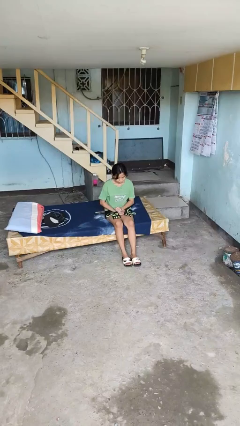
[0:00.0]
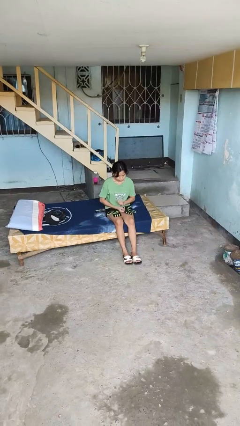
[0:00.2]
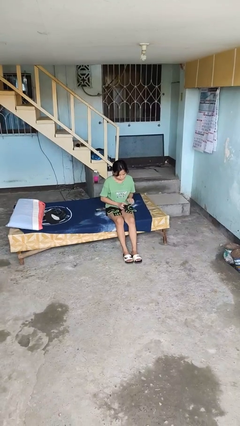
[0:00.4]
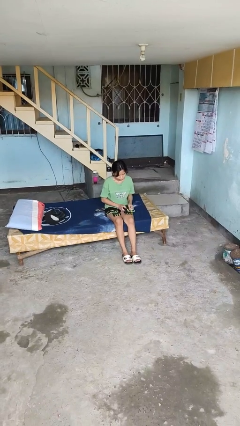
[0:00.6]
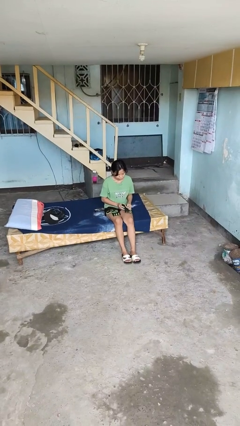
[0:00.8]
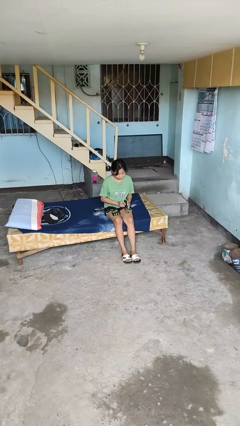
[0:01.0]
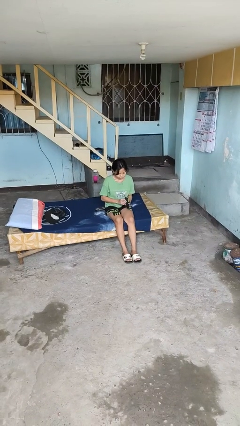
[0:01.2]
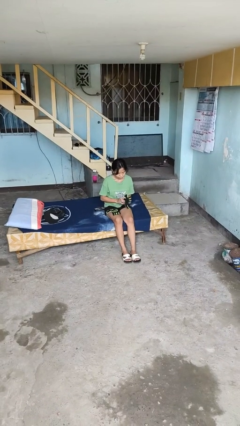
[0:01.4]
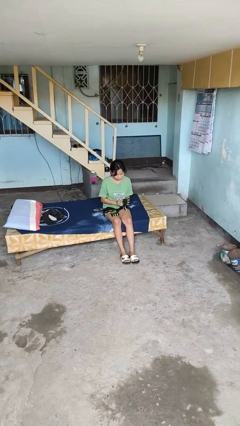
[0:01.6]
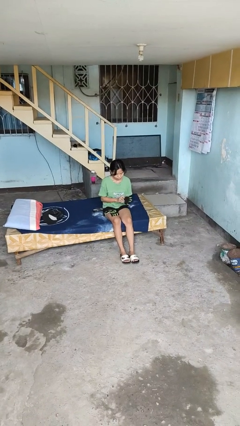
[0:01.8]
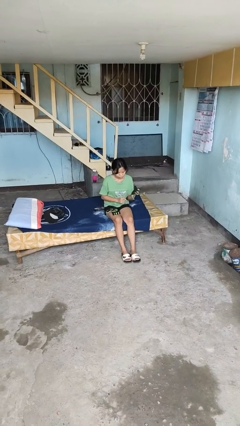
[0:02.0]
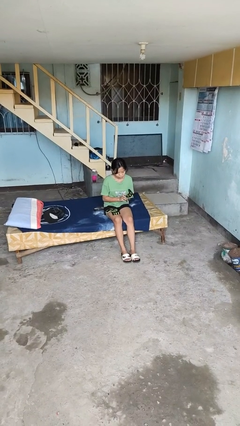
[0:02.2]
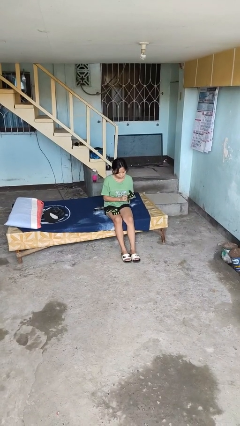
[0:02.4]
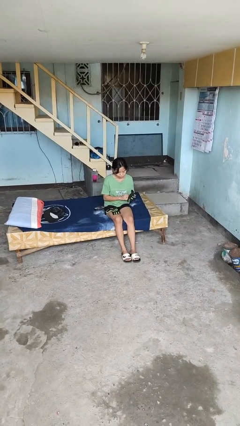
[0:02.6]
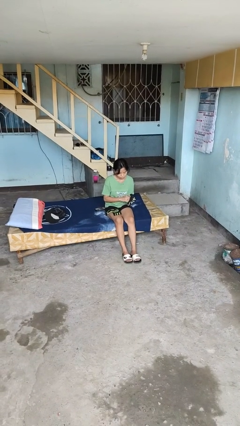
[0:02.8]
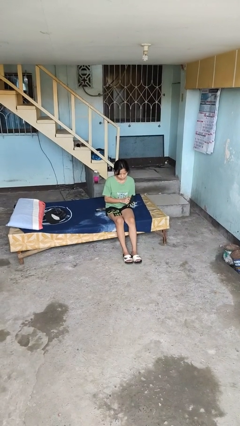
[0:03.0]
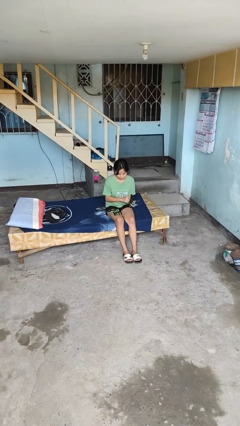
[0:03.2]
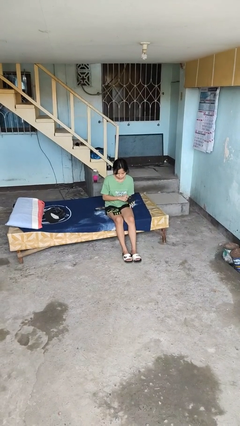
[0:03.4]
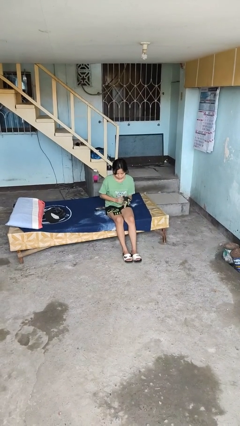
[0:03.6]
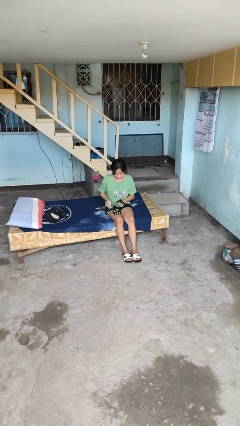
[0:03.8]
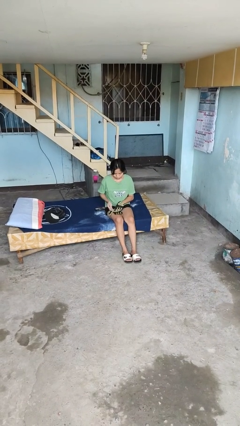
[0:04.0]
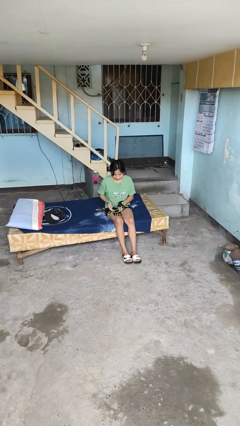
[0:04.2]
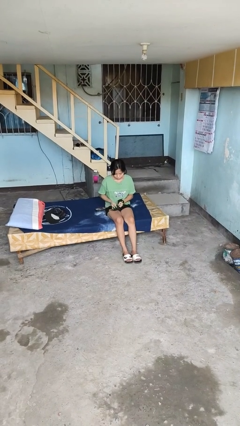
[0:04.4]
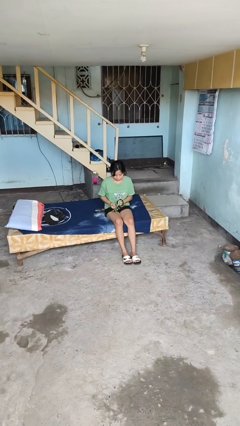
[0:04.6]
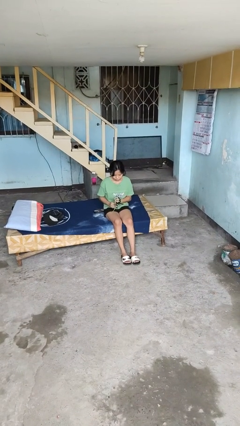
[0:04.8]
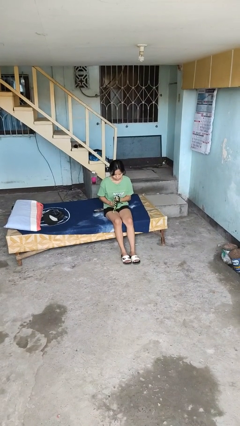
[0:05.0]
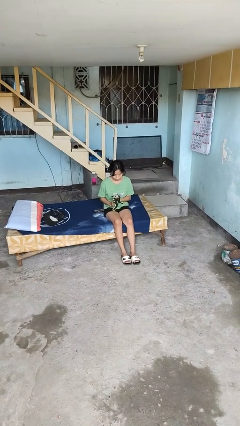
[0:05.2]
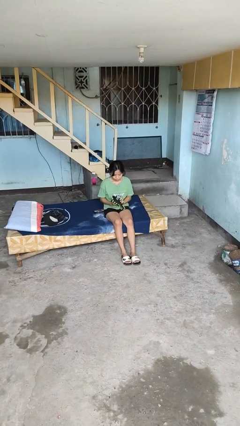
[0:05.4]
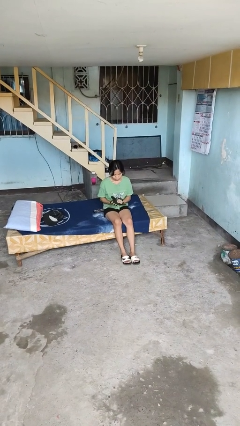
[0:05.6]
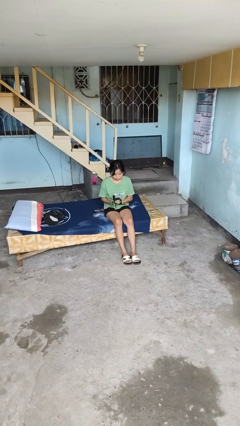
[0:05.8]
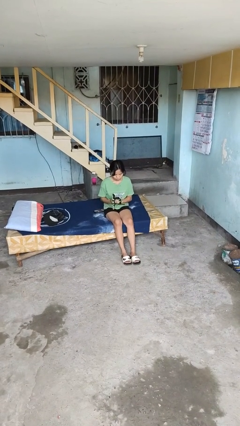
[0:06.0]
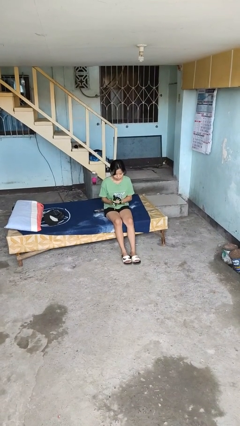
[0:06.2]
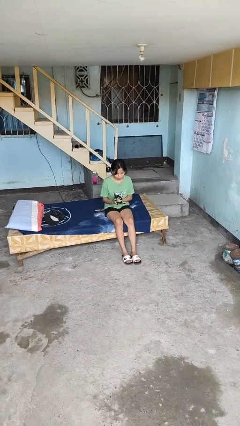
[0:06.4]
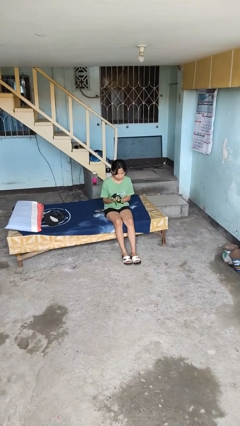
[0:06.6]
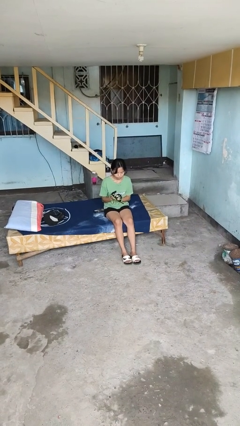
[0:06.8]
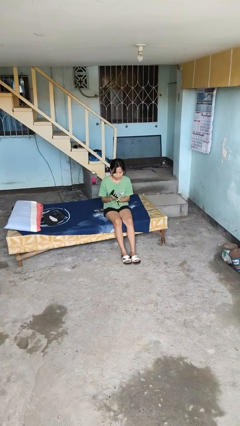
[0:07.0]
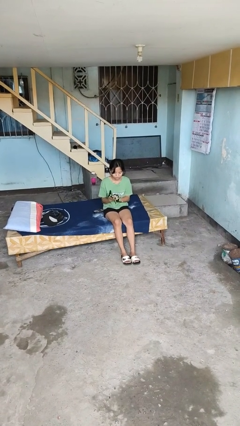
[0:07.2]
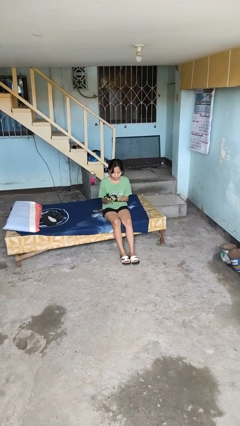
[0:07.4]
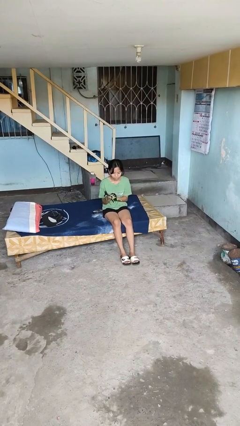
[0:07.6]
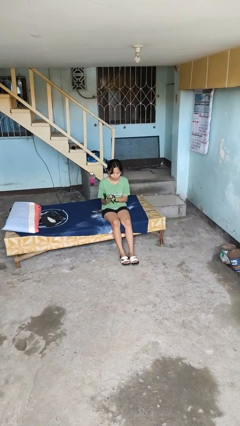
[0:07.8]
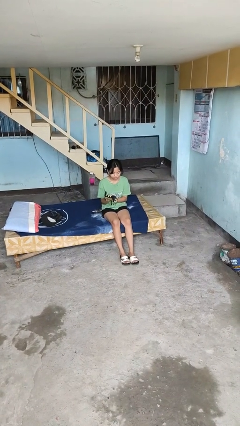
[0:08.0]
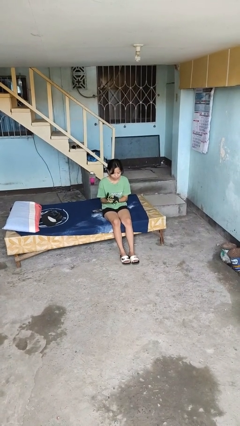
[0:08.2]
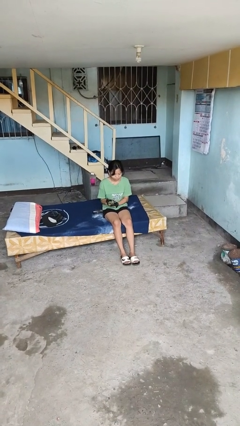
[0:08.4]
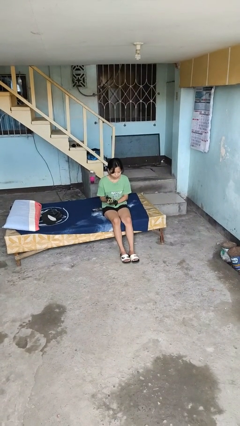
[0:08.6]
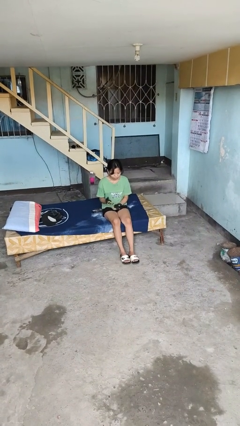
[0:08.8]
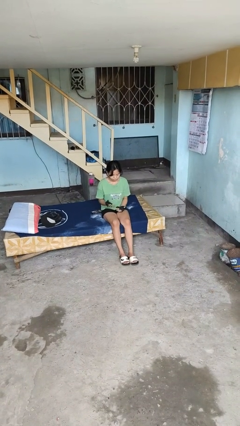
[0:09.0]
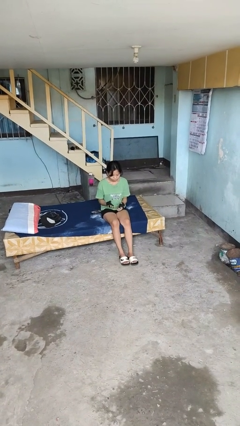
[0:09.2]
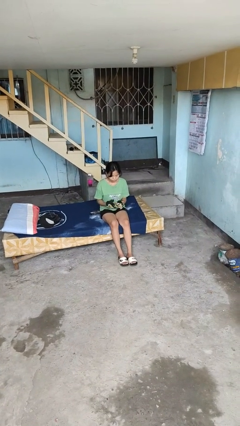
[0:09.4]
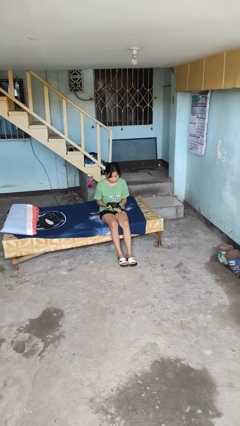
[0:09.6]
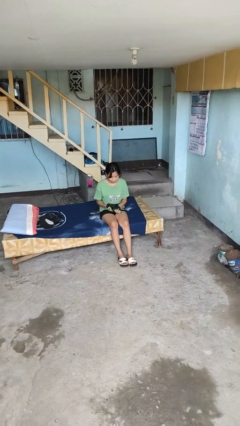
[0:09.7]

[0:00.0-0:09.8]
person puts on gloves

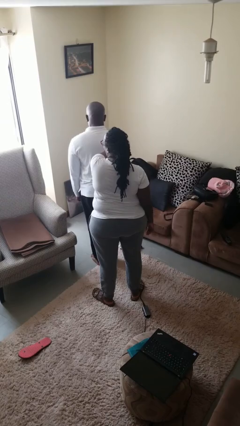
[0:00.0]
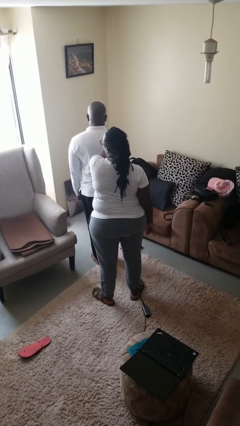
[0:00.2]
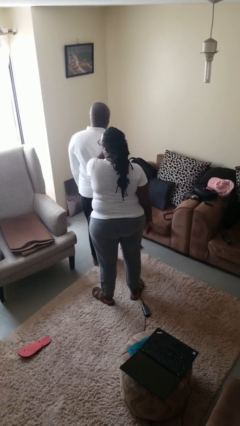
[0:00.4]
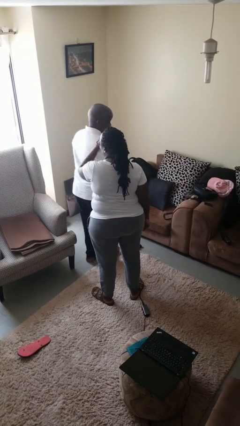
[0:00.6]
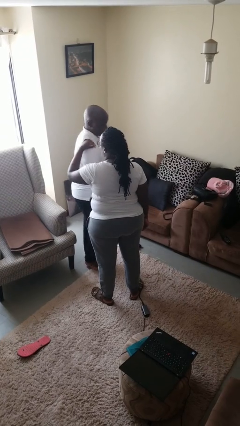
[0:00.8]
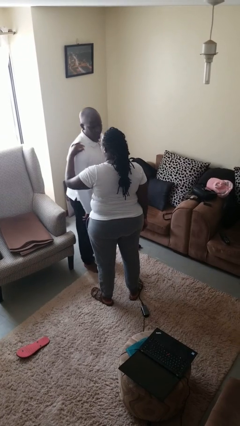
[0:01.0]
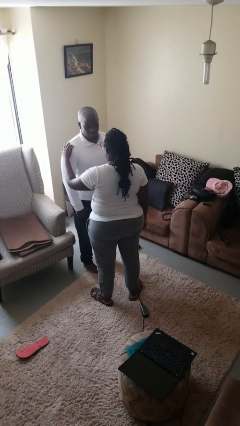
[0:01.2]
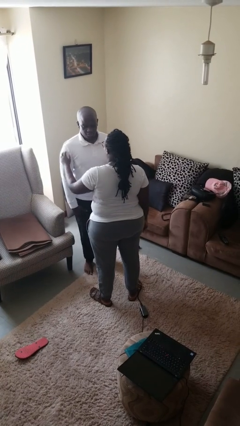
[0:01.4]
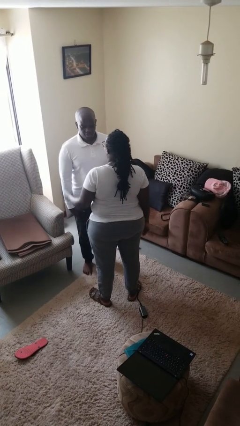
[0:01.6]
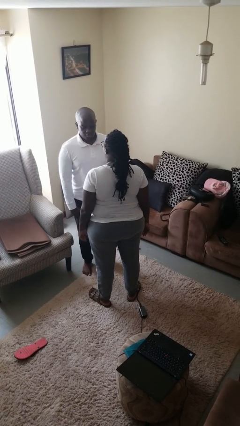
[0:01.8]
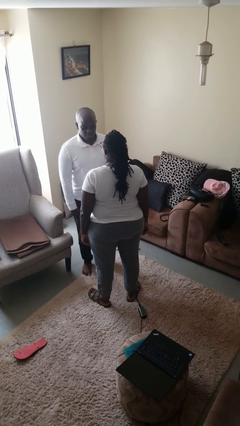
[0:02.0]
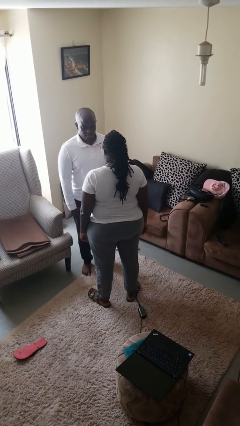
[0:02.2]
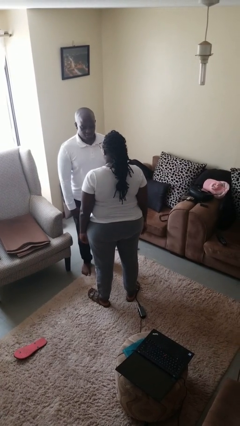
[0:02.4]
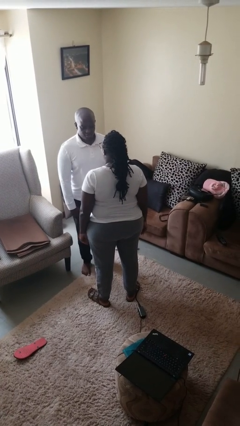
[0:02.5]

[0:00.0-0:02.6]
person spins person around

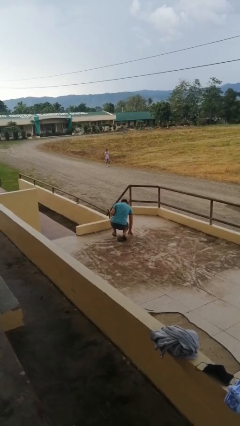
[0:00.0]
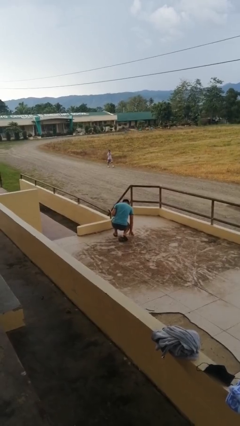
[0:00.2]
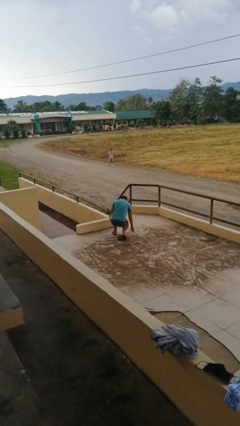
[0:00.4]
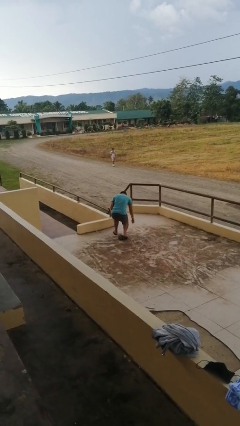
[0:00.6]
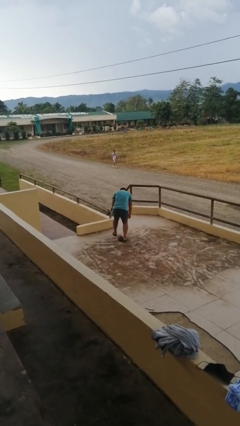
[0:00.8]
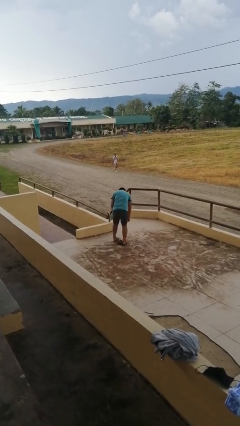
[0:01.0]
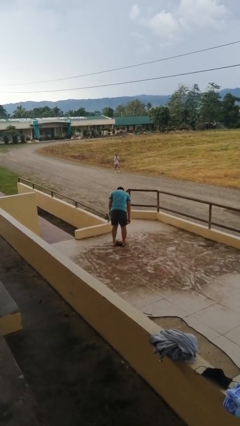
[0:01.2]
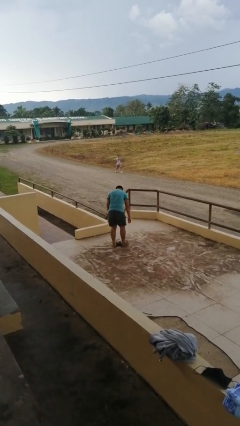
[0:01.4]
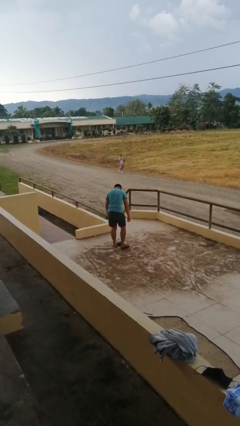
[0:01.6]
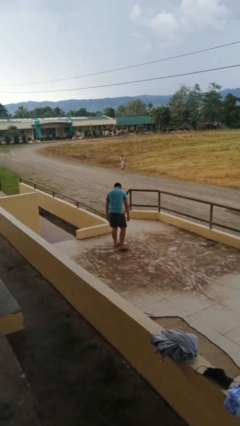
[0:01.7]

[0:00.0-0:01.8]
person stands up from floor

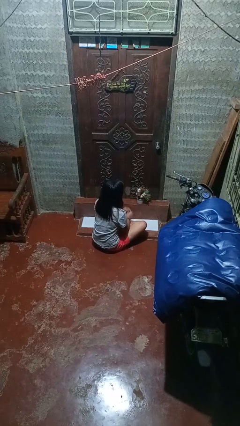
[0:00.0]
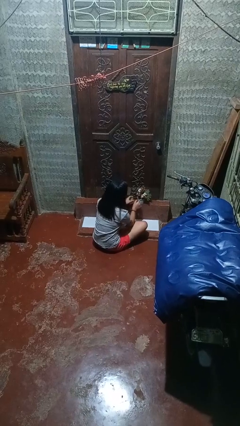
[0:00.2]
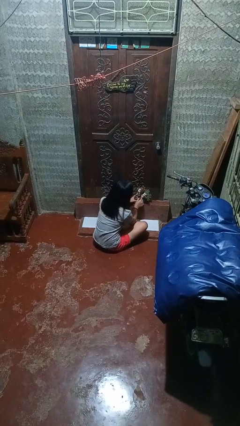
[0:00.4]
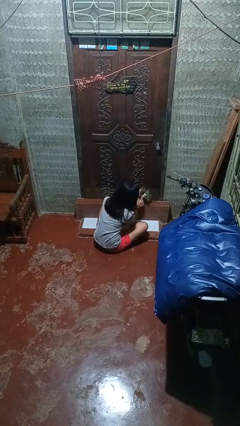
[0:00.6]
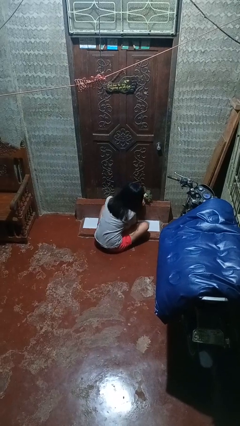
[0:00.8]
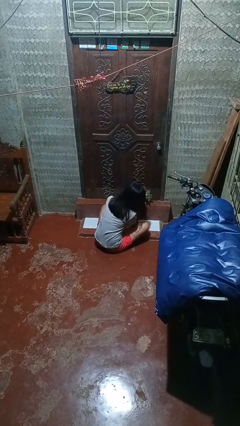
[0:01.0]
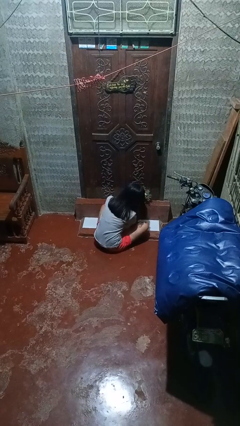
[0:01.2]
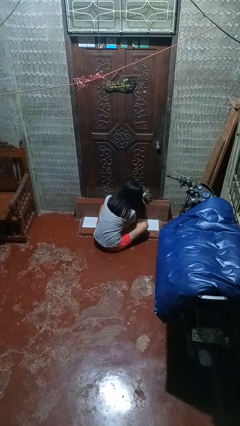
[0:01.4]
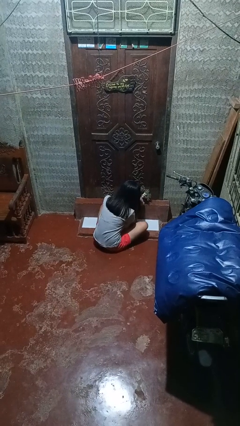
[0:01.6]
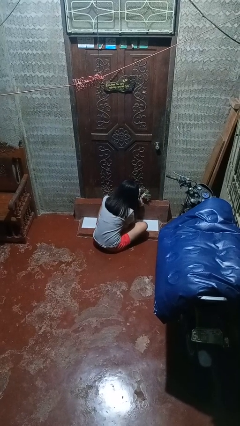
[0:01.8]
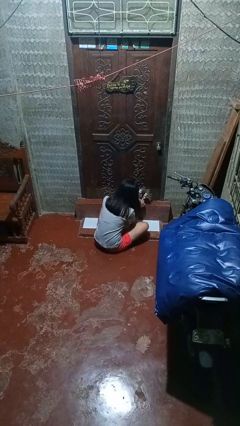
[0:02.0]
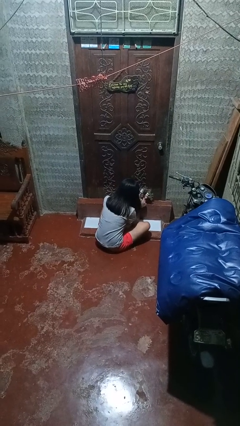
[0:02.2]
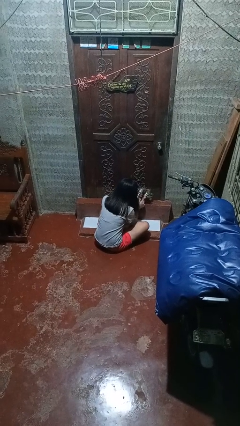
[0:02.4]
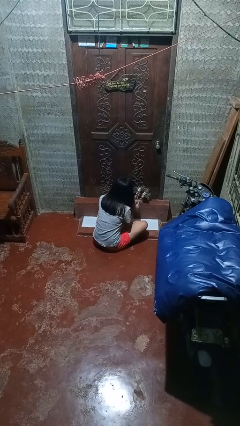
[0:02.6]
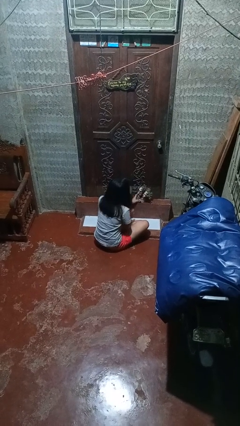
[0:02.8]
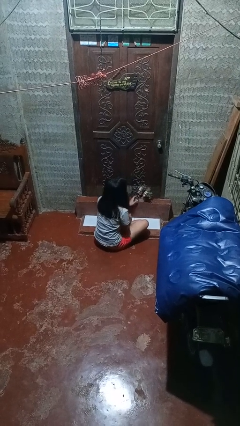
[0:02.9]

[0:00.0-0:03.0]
person arranges flowers in vase

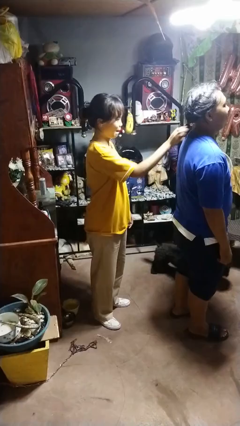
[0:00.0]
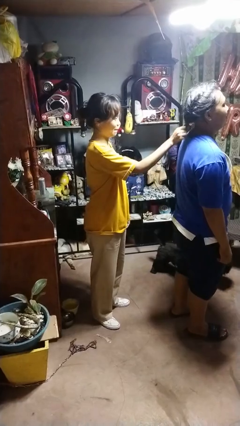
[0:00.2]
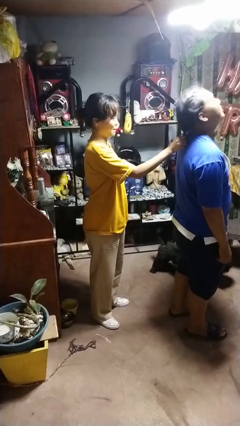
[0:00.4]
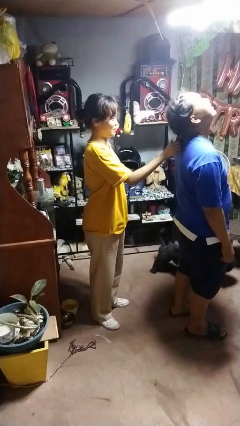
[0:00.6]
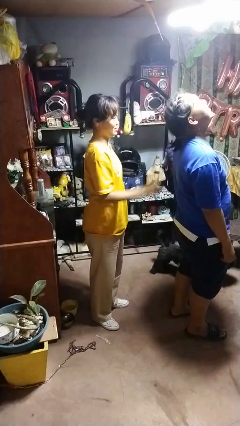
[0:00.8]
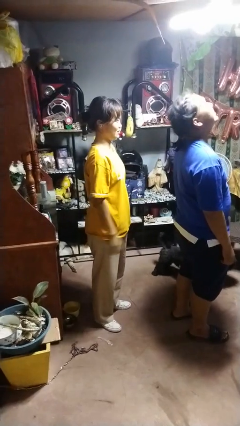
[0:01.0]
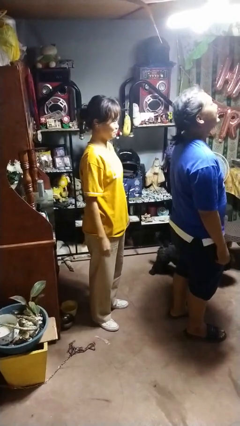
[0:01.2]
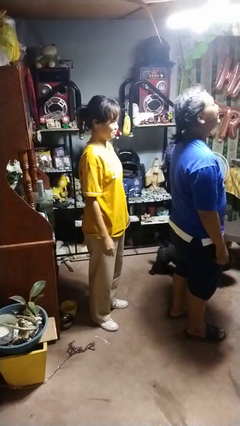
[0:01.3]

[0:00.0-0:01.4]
person grabs person by hair
